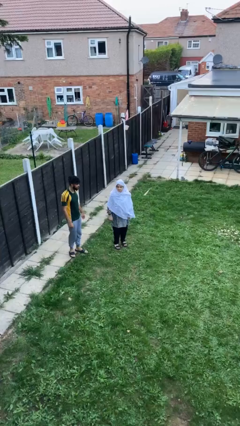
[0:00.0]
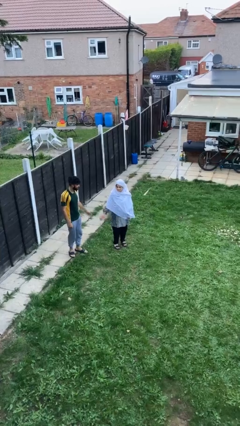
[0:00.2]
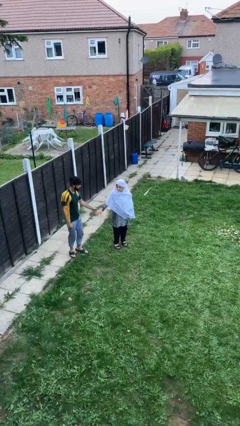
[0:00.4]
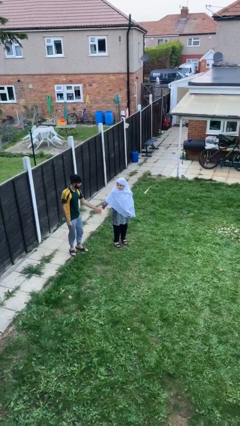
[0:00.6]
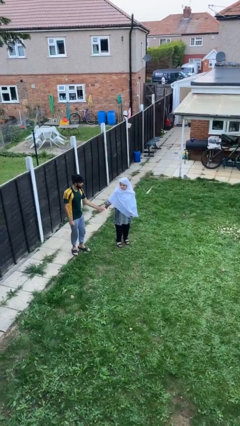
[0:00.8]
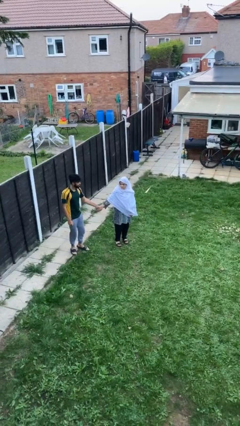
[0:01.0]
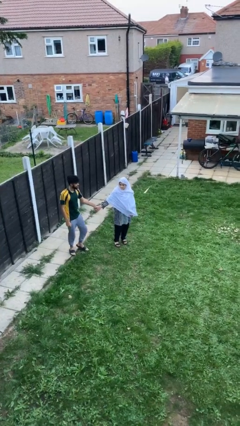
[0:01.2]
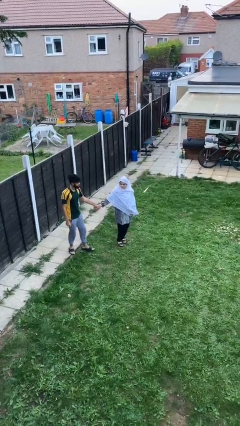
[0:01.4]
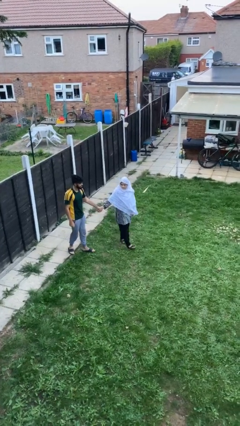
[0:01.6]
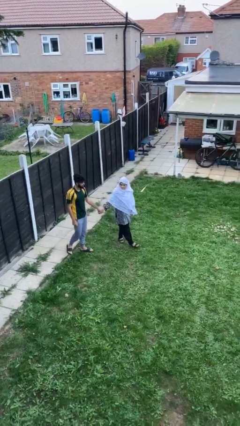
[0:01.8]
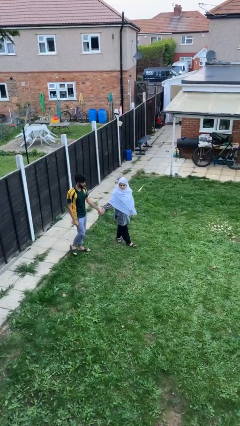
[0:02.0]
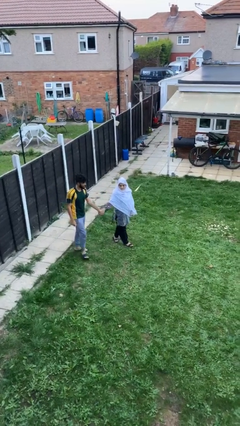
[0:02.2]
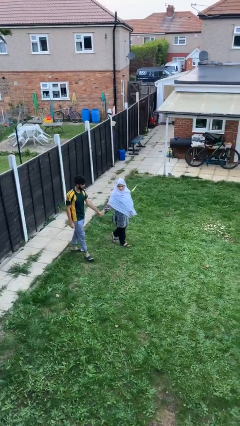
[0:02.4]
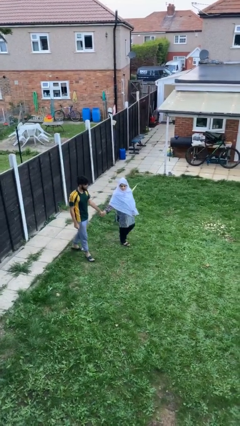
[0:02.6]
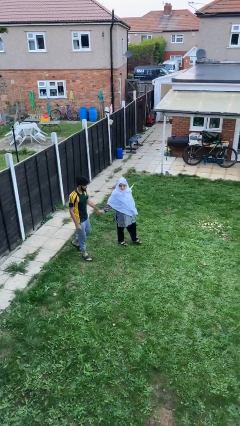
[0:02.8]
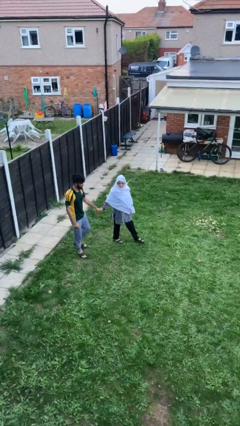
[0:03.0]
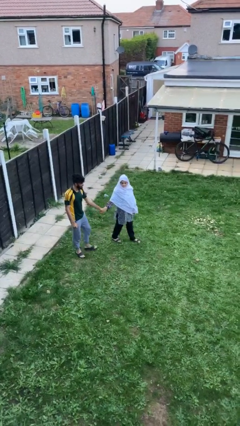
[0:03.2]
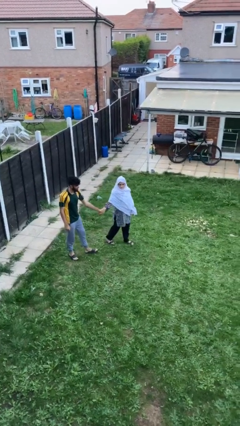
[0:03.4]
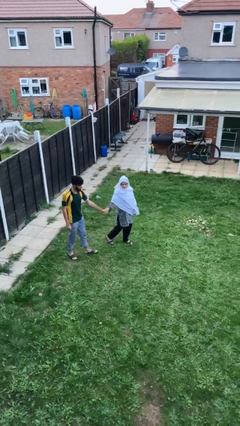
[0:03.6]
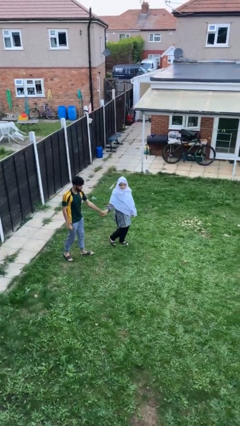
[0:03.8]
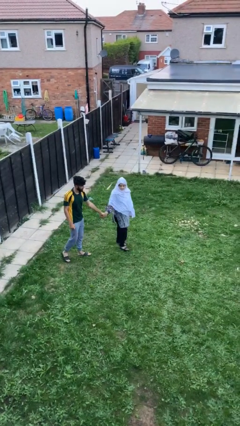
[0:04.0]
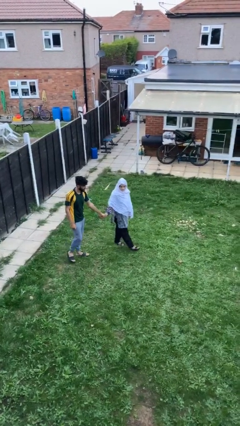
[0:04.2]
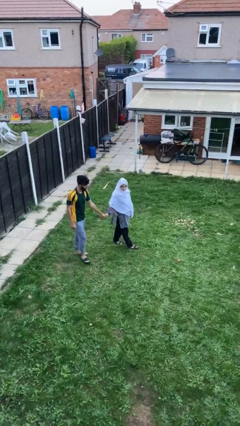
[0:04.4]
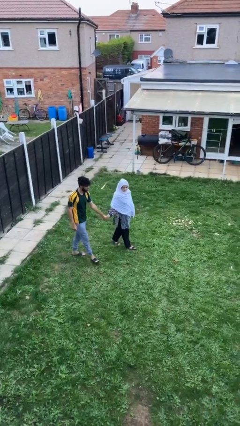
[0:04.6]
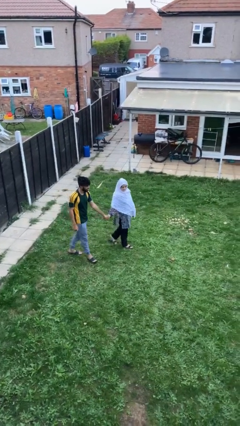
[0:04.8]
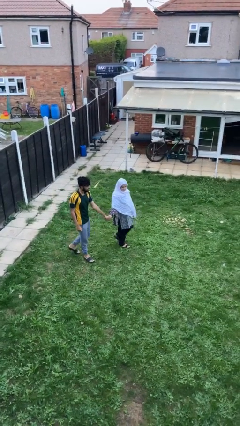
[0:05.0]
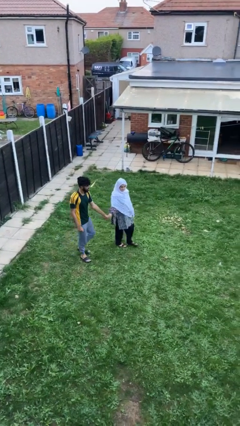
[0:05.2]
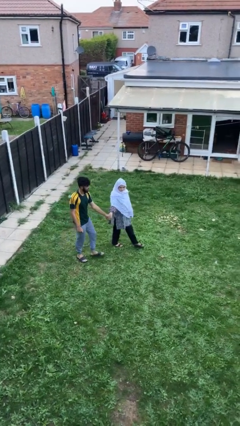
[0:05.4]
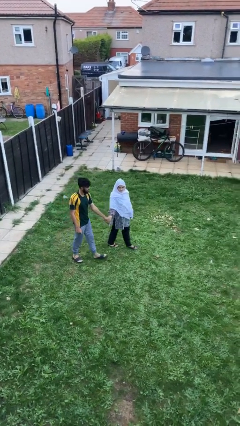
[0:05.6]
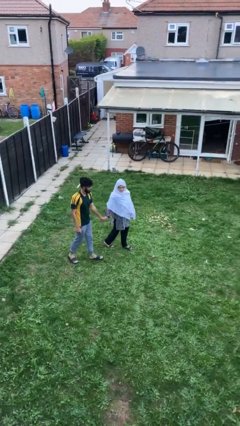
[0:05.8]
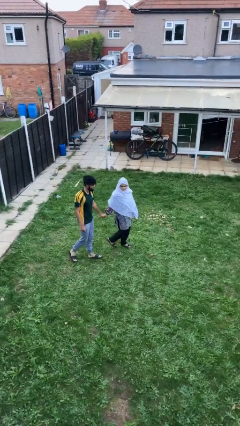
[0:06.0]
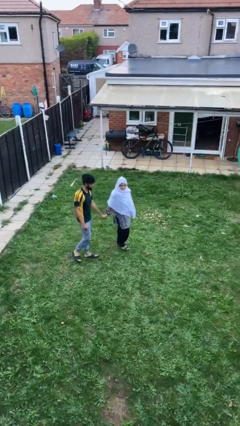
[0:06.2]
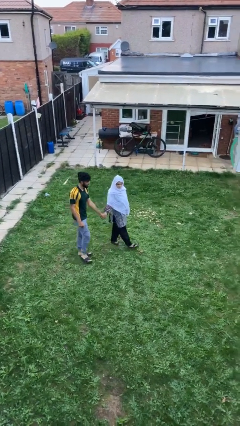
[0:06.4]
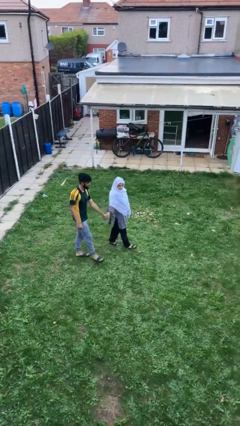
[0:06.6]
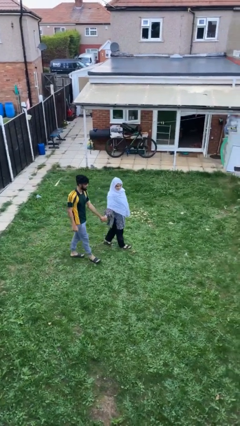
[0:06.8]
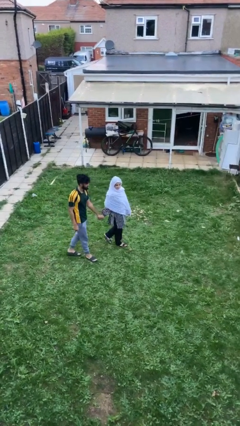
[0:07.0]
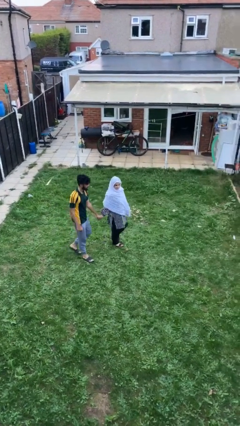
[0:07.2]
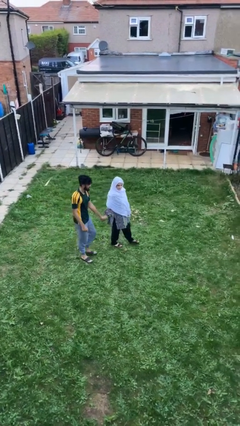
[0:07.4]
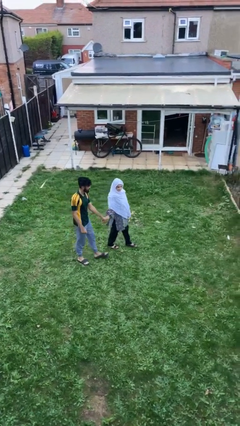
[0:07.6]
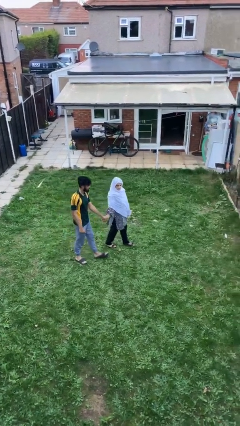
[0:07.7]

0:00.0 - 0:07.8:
person holds hand

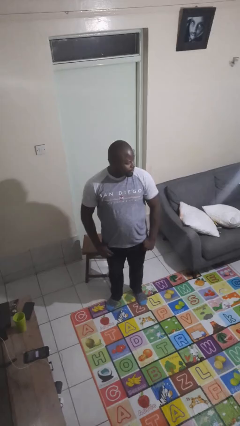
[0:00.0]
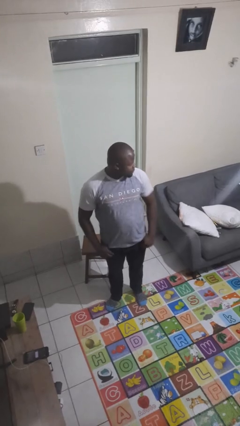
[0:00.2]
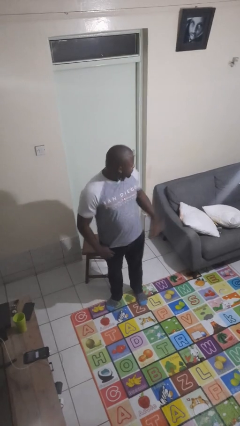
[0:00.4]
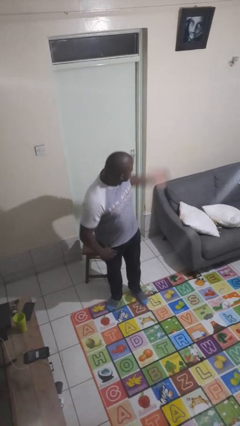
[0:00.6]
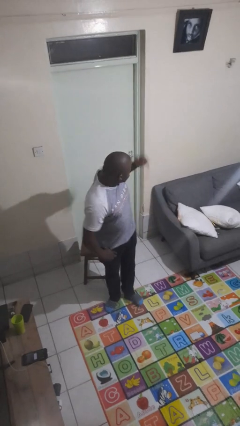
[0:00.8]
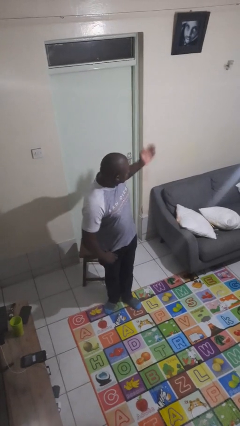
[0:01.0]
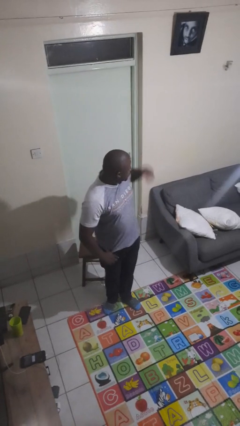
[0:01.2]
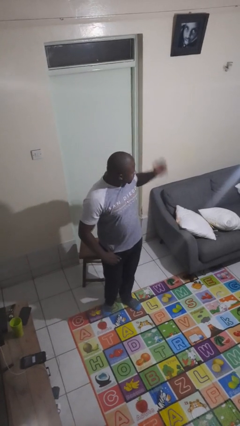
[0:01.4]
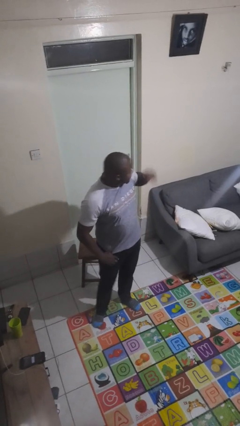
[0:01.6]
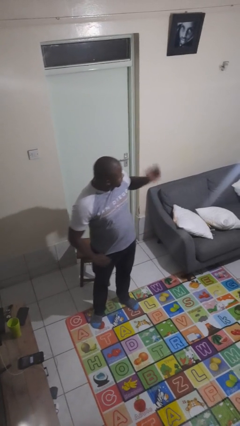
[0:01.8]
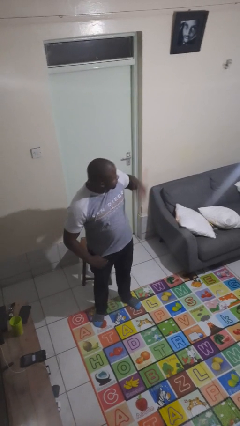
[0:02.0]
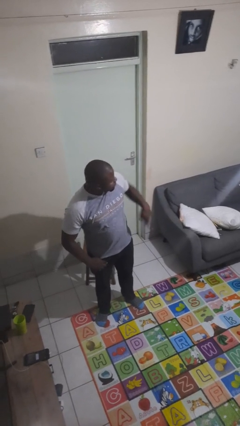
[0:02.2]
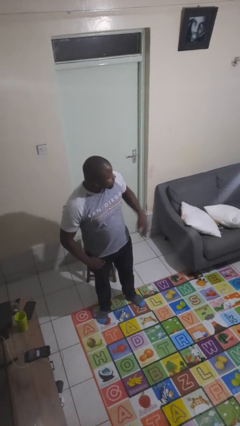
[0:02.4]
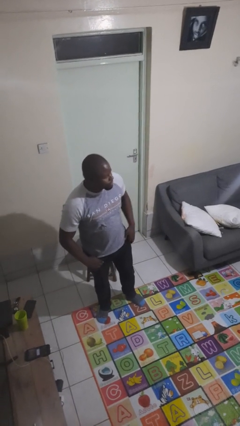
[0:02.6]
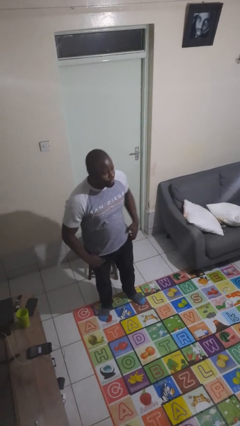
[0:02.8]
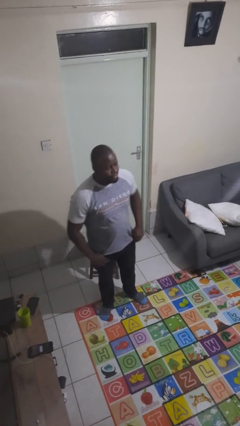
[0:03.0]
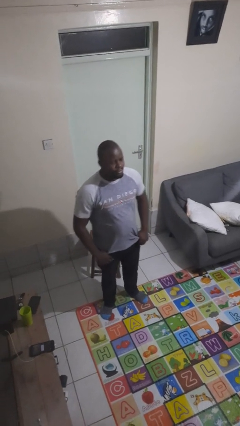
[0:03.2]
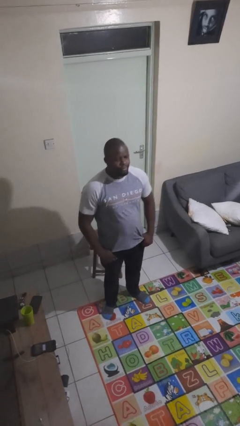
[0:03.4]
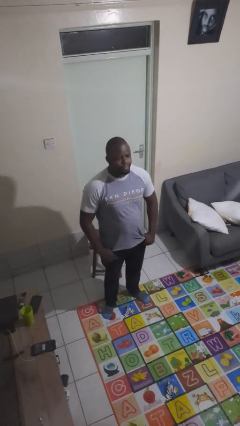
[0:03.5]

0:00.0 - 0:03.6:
person gestures come here

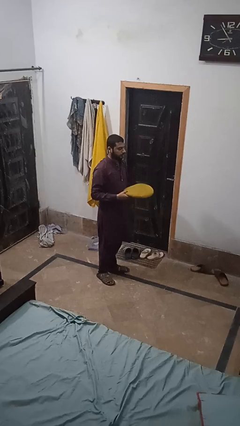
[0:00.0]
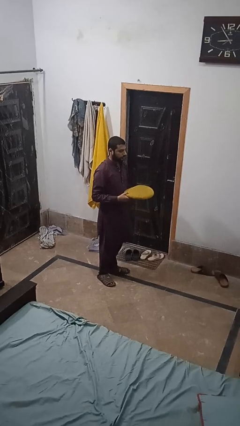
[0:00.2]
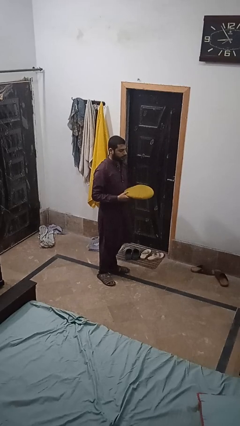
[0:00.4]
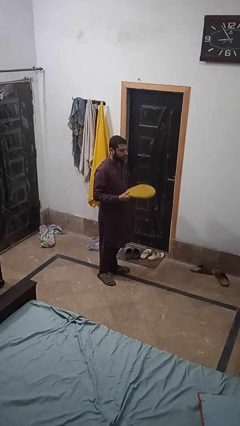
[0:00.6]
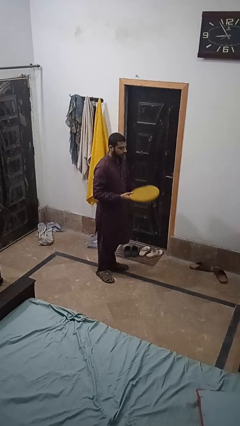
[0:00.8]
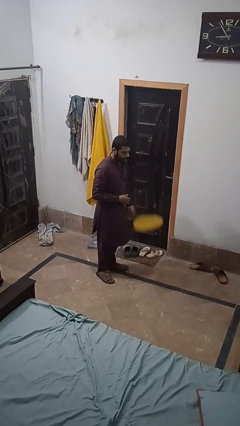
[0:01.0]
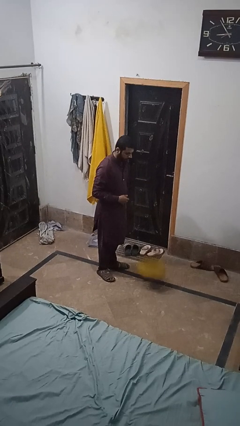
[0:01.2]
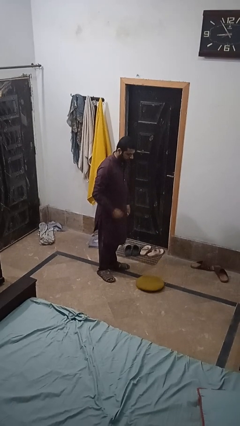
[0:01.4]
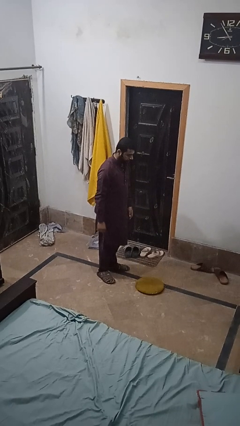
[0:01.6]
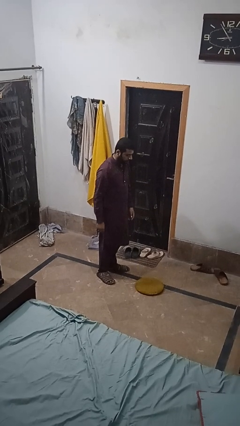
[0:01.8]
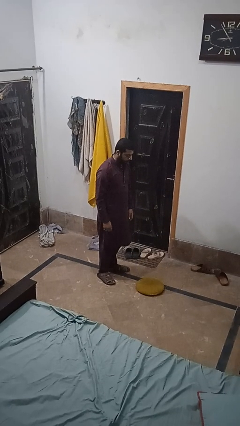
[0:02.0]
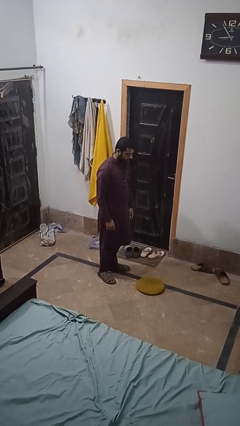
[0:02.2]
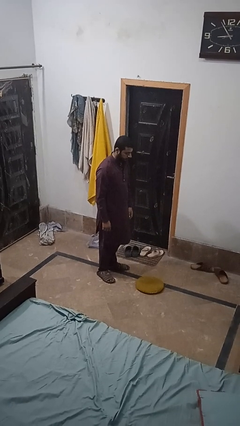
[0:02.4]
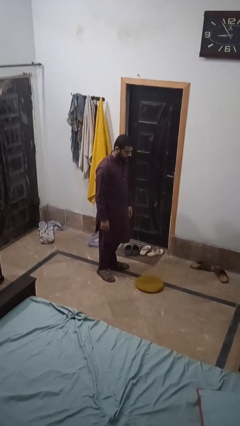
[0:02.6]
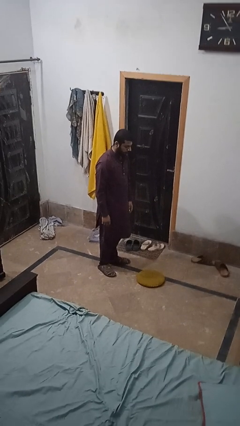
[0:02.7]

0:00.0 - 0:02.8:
person throws object to ground

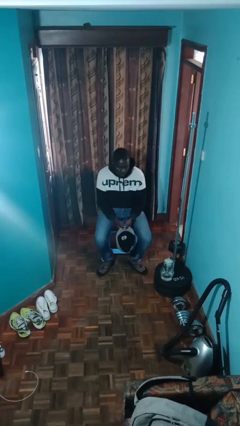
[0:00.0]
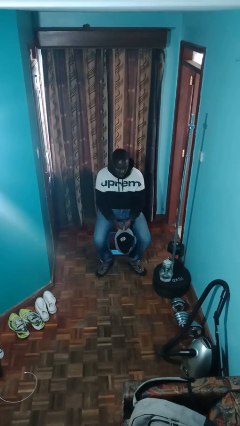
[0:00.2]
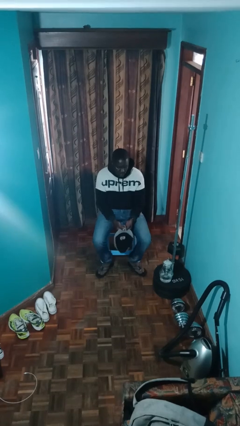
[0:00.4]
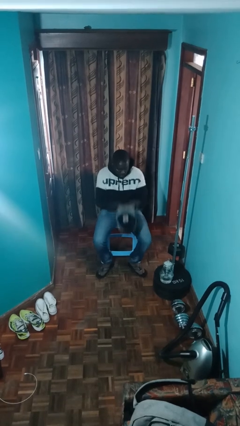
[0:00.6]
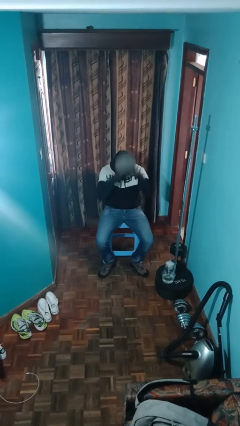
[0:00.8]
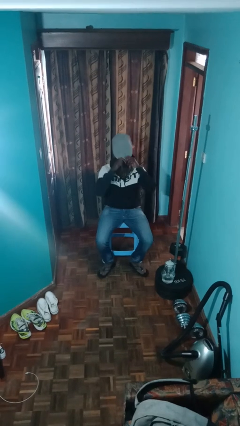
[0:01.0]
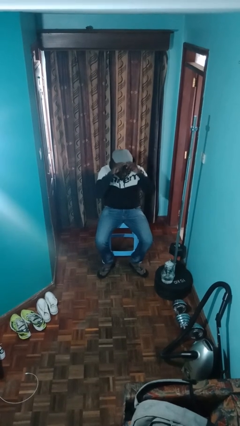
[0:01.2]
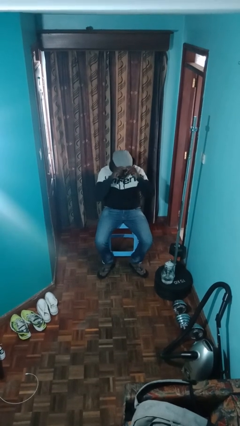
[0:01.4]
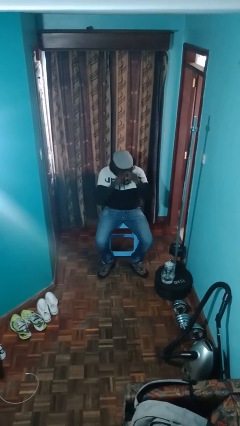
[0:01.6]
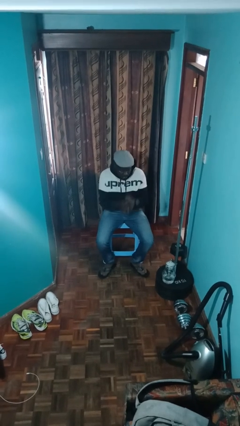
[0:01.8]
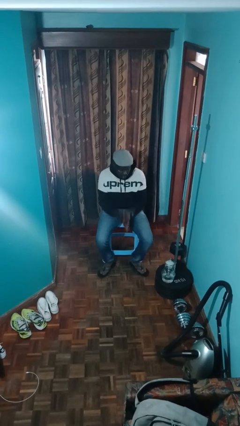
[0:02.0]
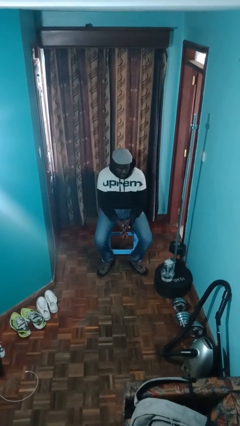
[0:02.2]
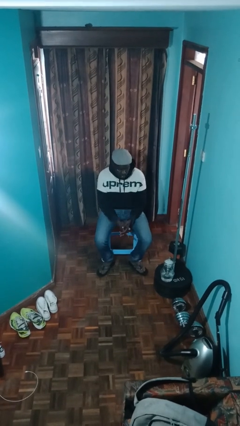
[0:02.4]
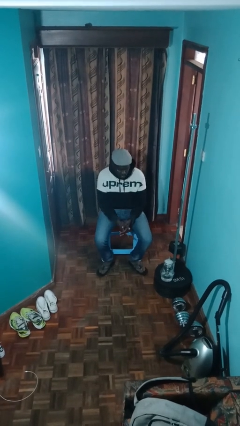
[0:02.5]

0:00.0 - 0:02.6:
person puts on hat

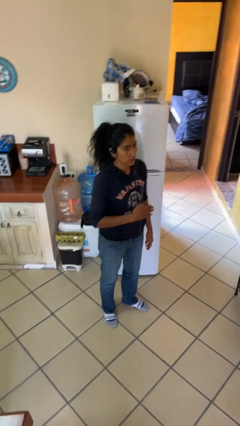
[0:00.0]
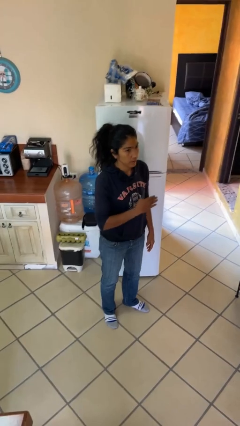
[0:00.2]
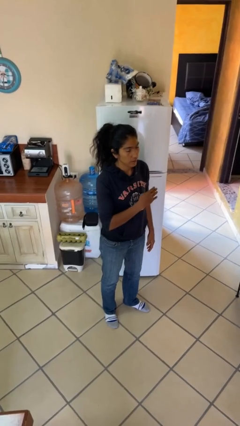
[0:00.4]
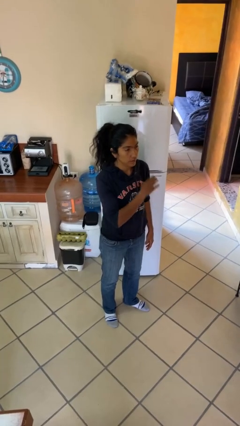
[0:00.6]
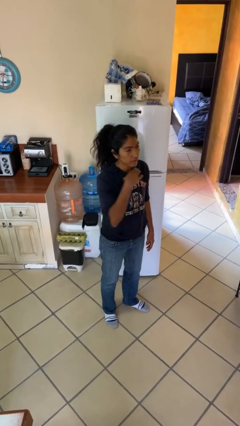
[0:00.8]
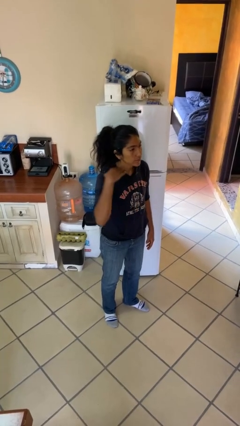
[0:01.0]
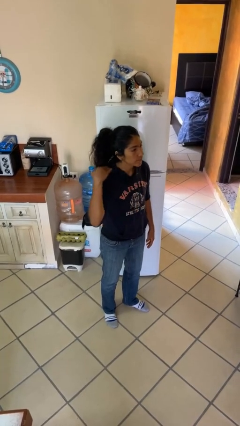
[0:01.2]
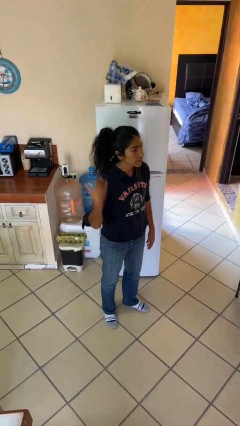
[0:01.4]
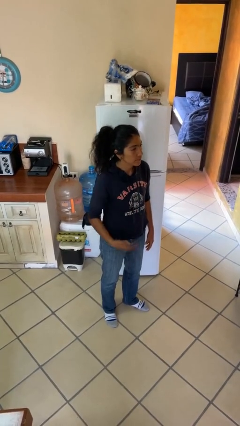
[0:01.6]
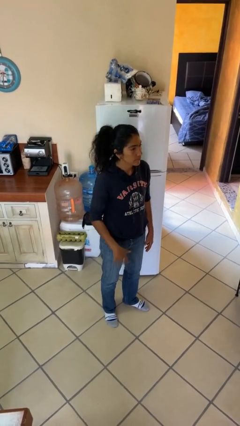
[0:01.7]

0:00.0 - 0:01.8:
person gestures cut
